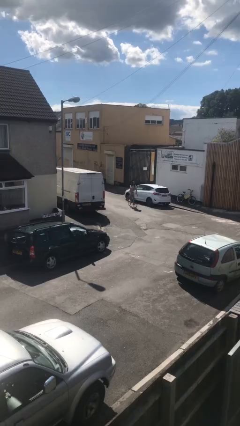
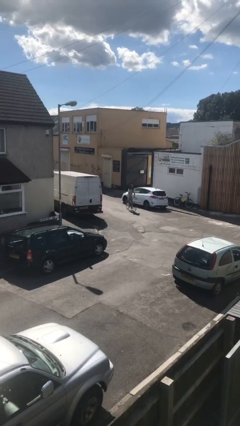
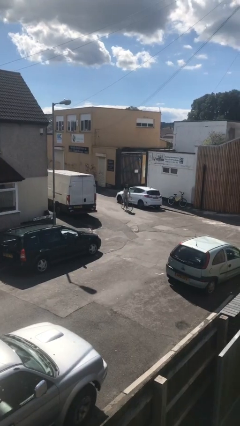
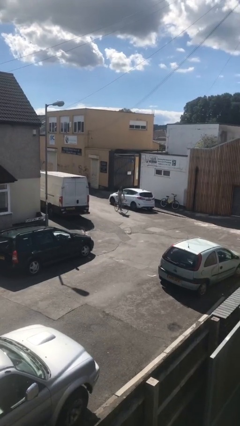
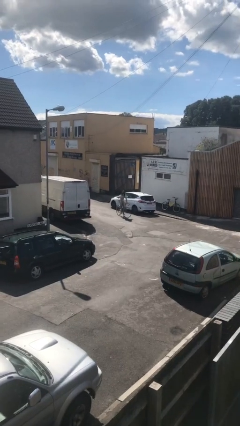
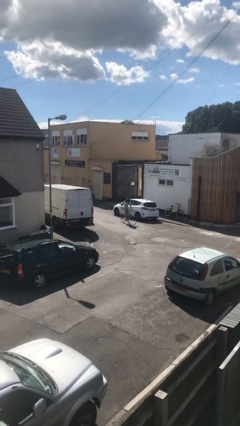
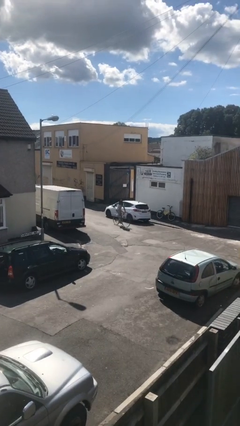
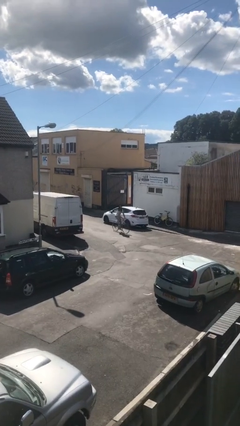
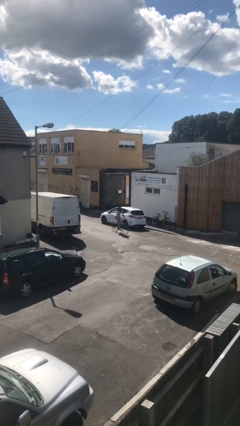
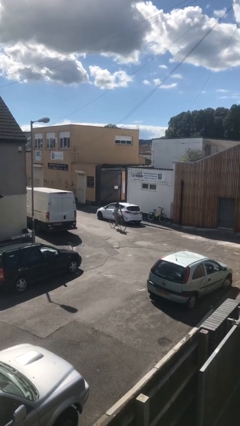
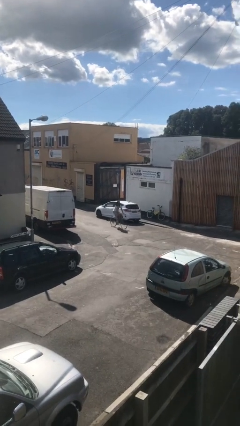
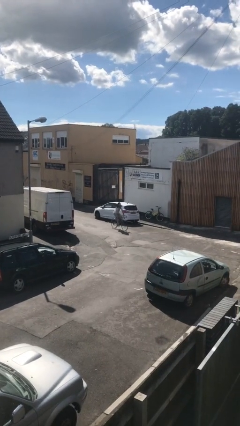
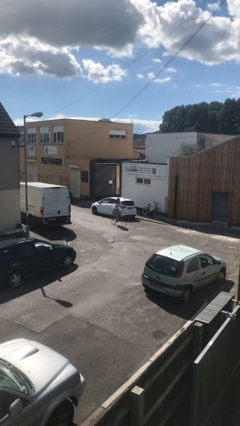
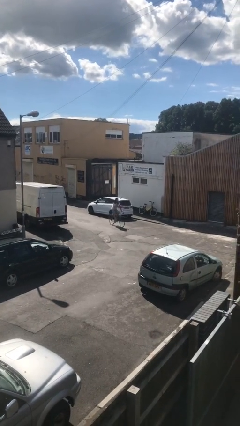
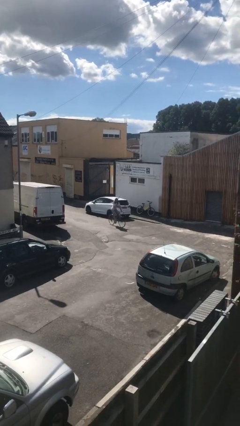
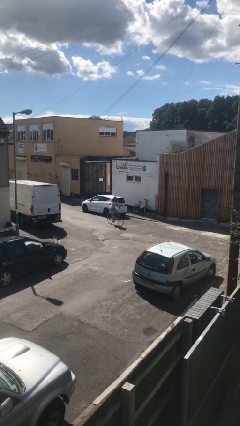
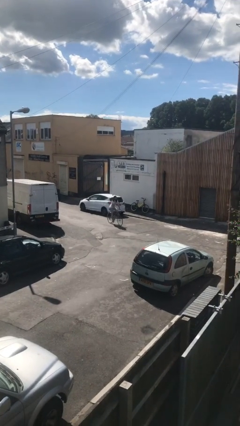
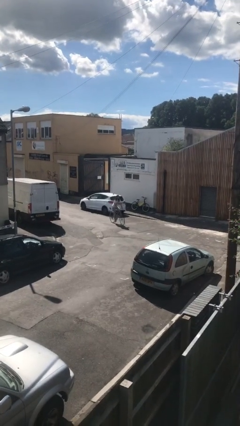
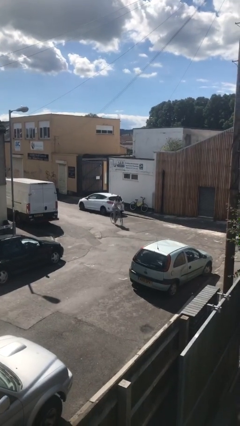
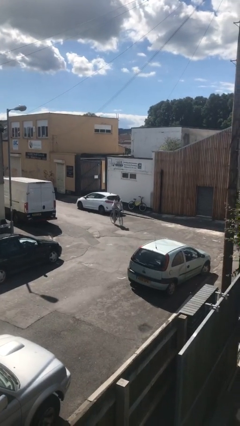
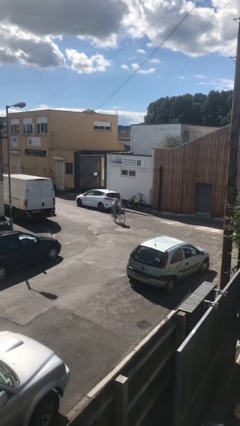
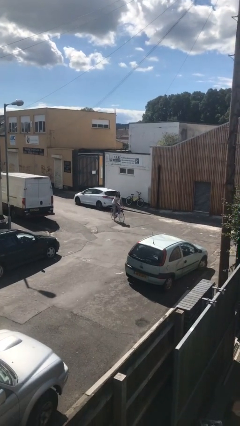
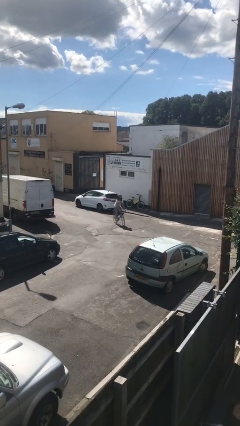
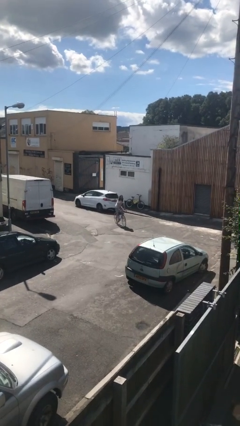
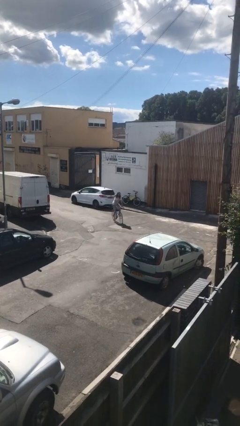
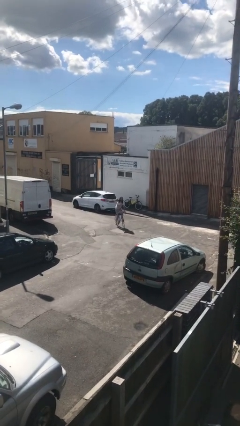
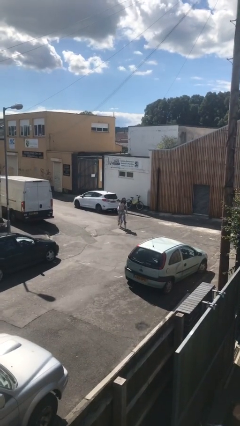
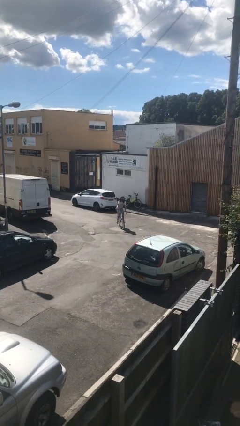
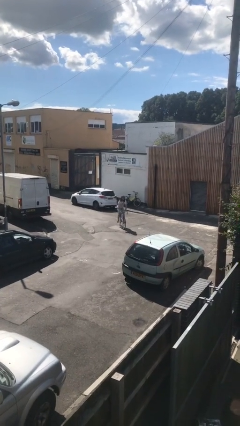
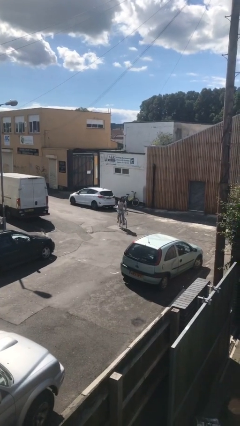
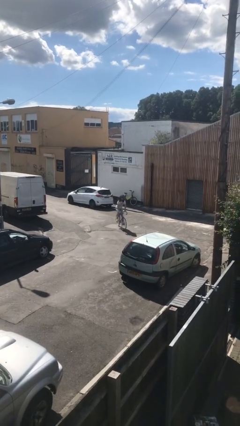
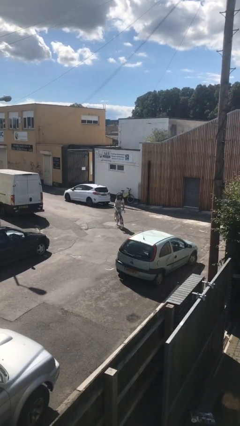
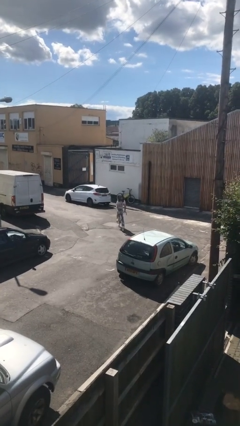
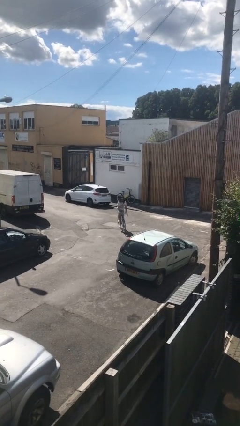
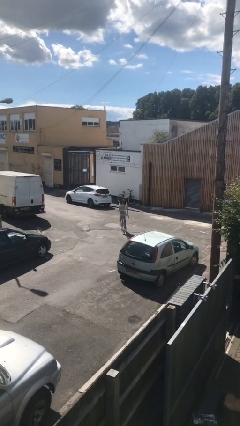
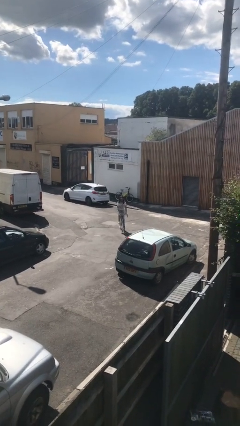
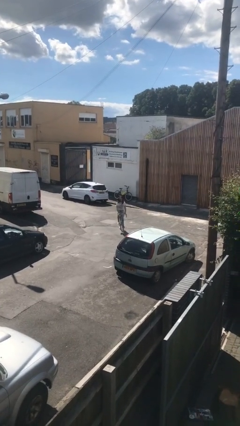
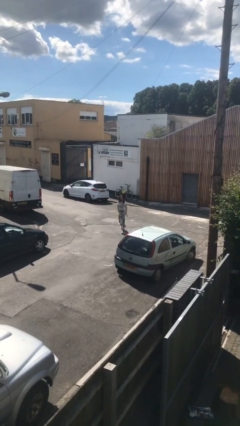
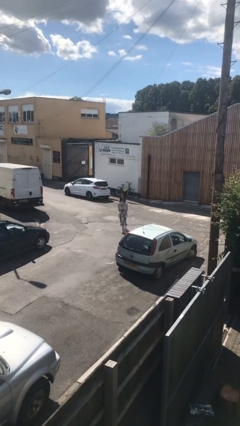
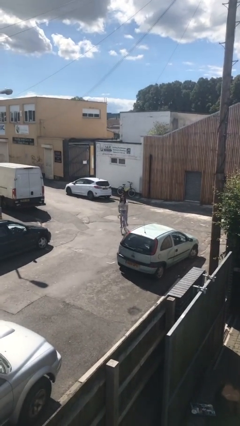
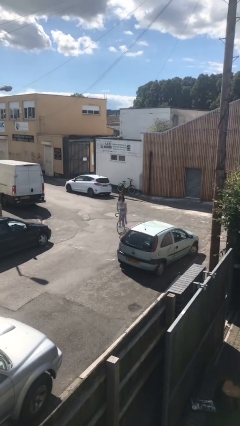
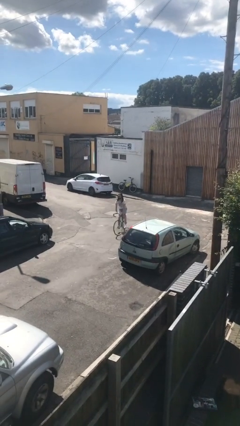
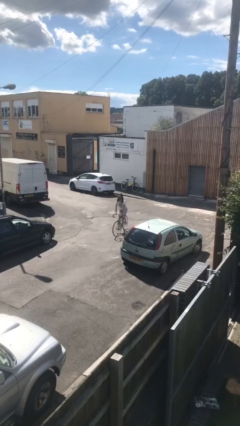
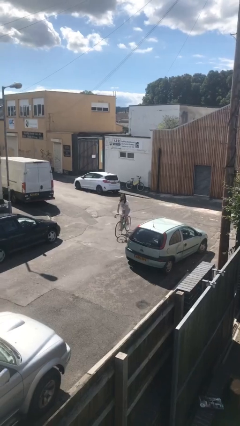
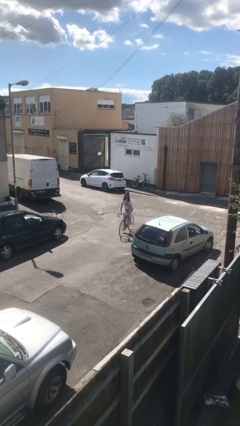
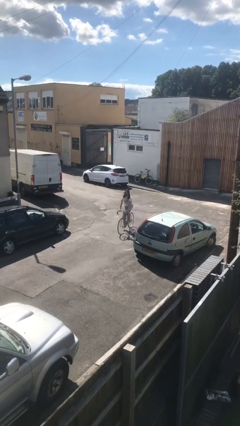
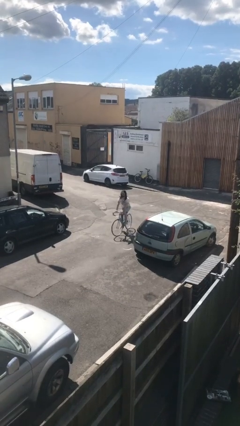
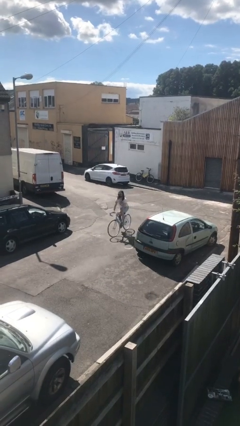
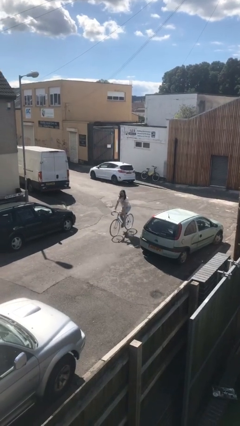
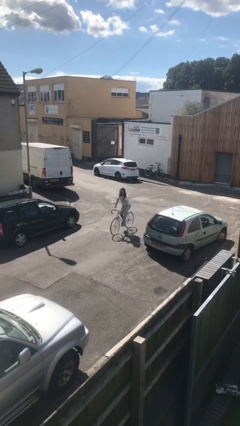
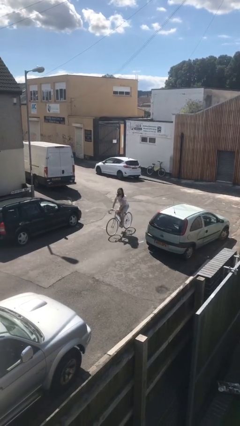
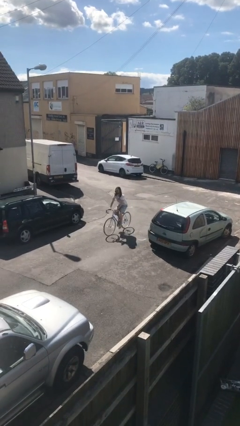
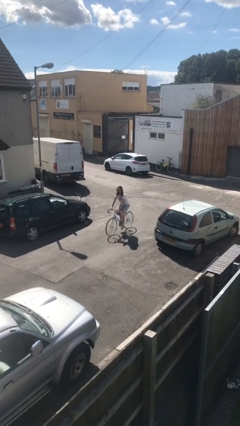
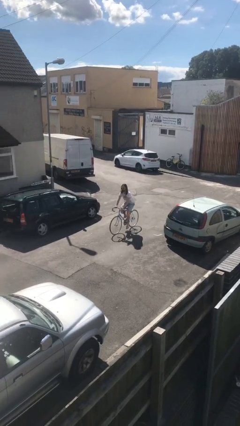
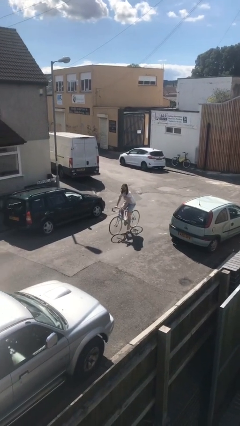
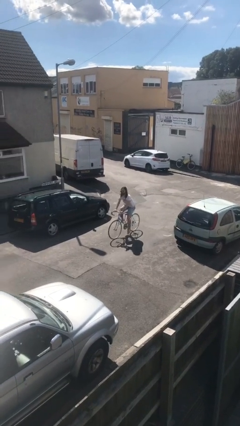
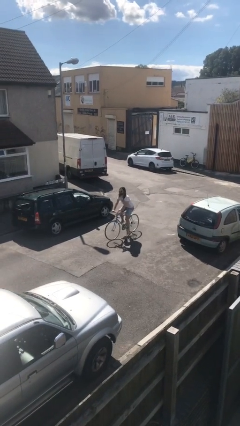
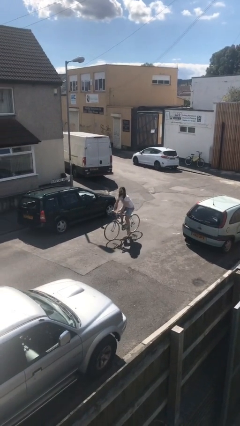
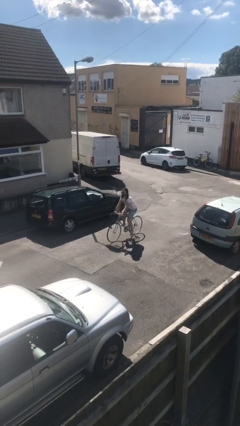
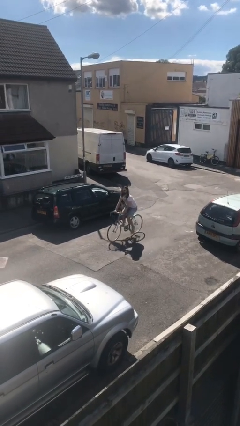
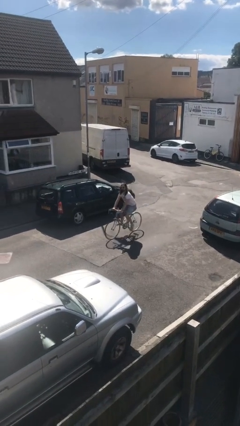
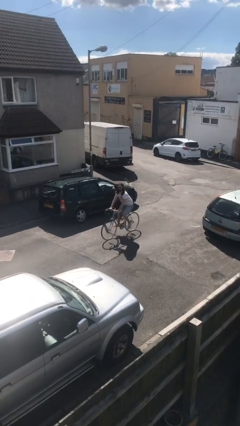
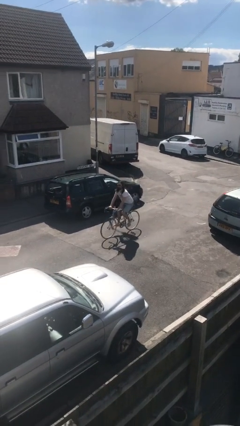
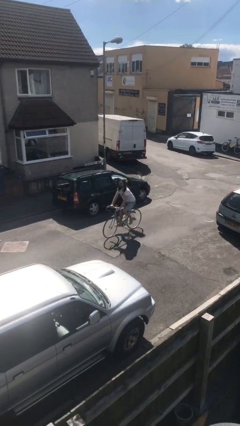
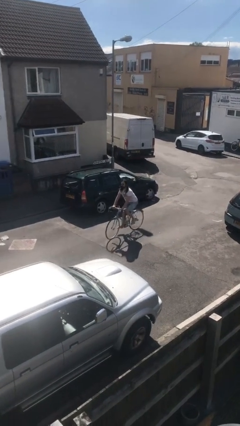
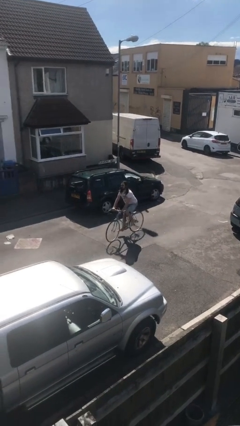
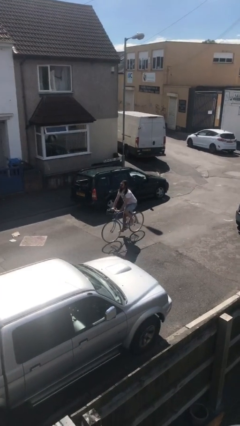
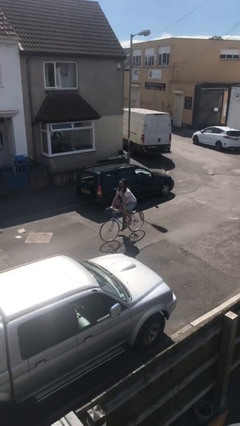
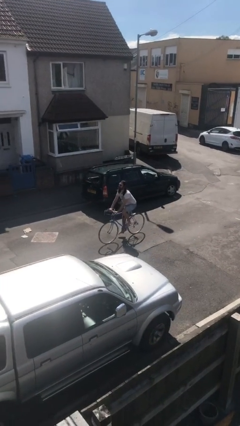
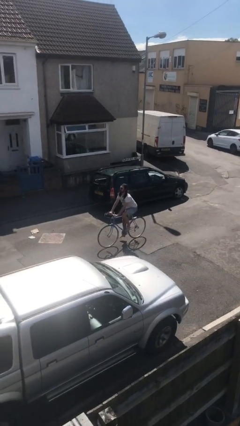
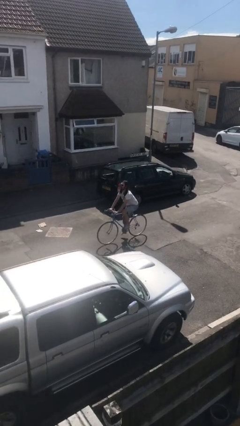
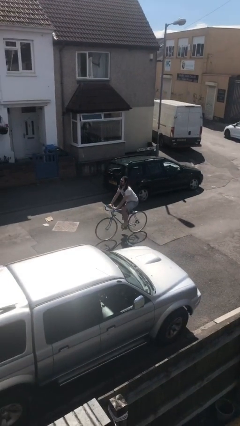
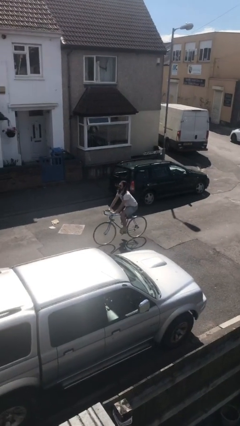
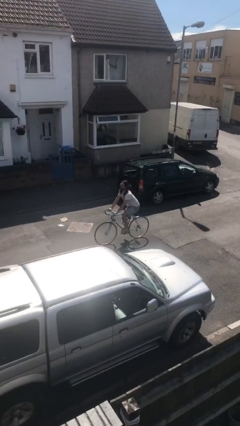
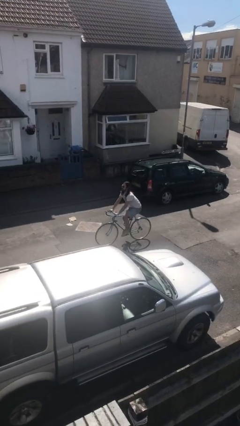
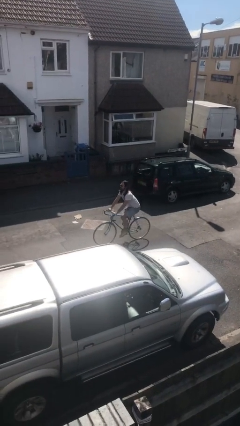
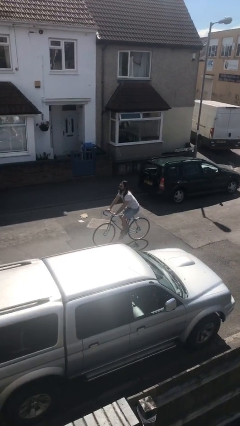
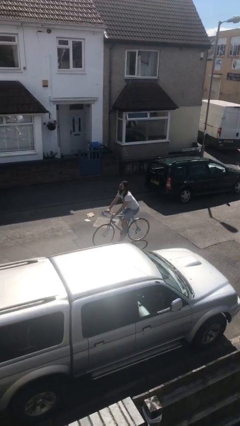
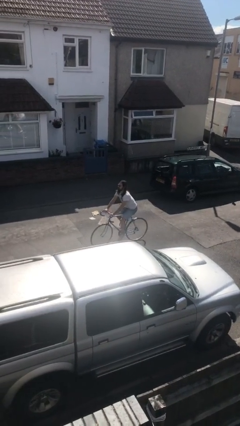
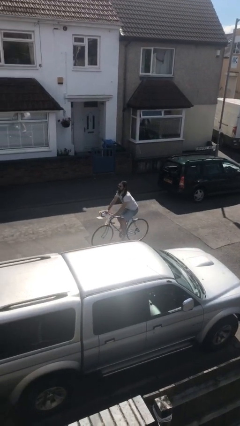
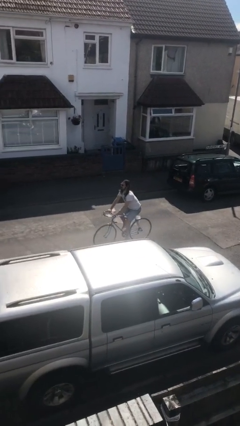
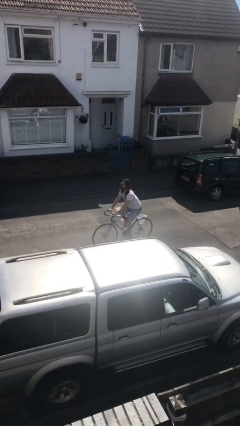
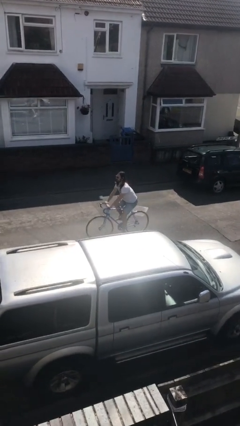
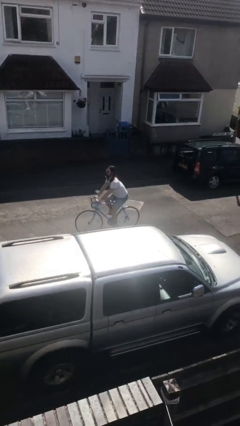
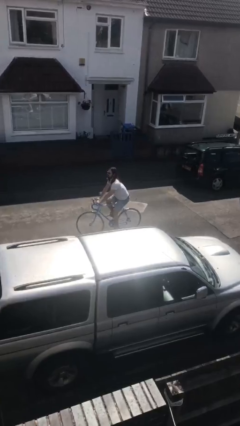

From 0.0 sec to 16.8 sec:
person rides bicycle

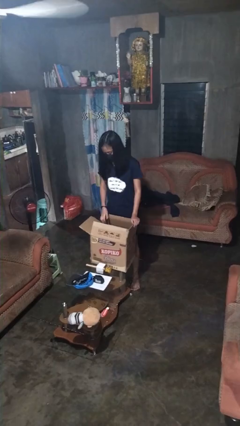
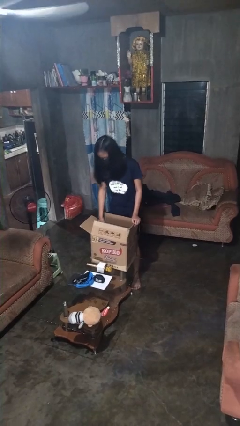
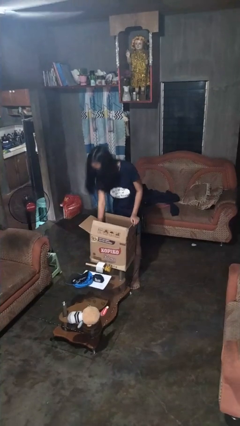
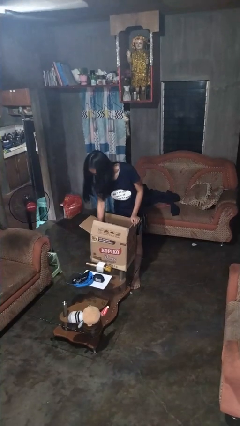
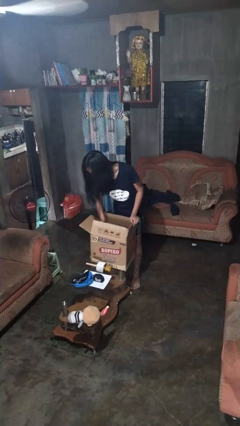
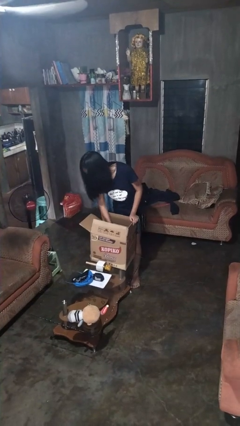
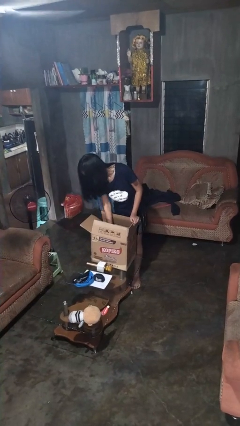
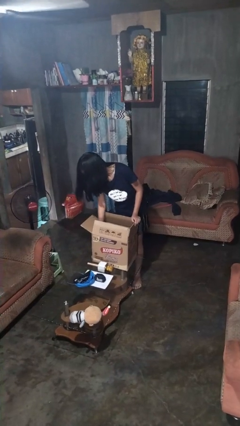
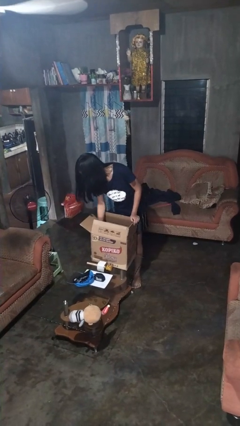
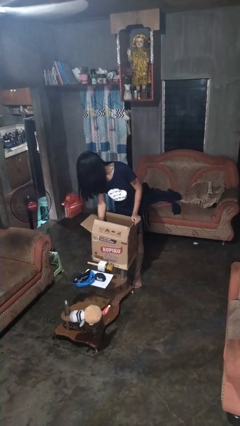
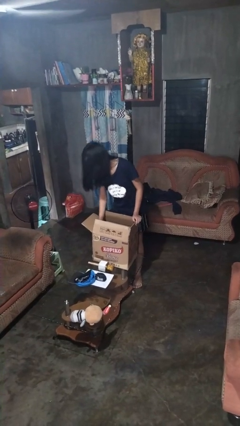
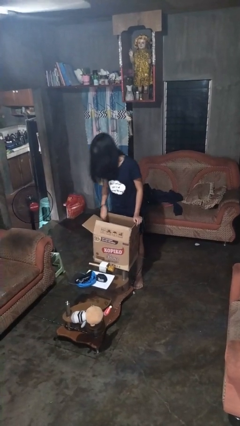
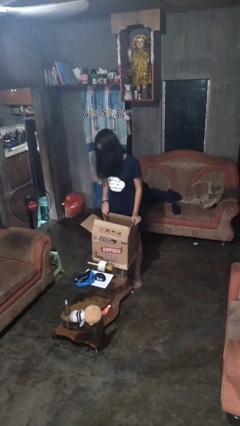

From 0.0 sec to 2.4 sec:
person searches in box
